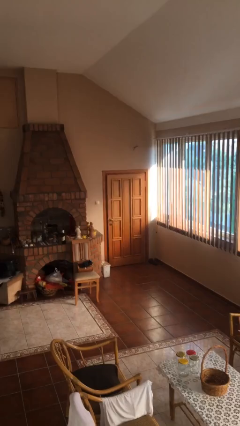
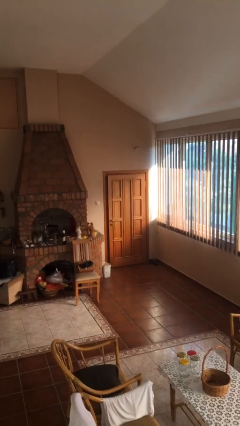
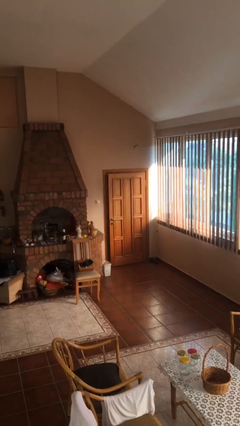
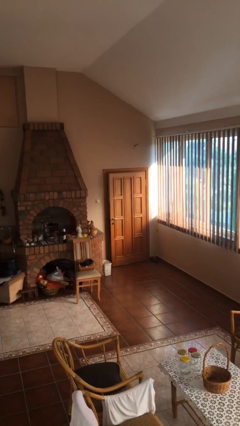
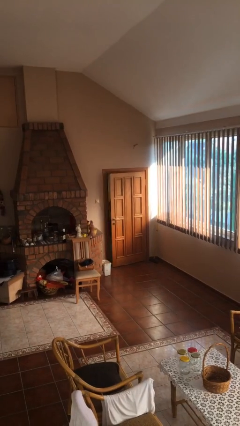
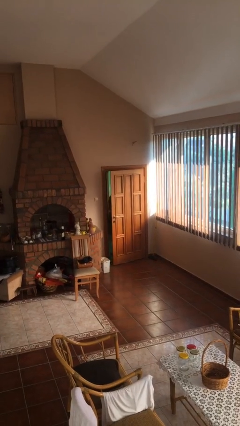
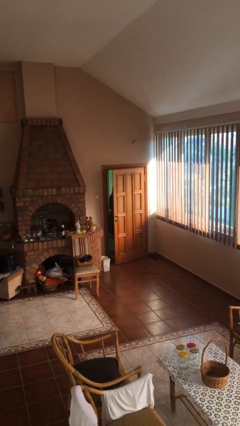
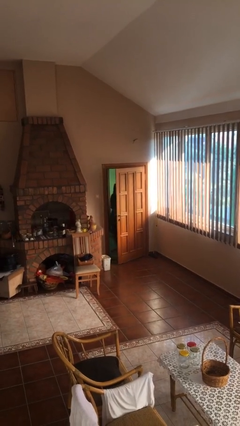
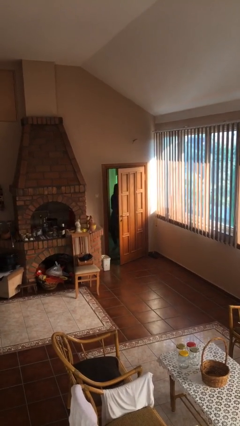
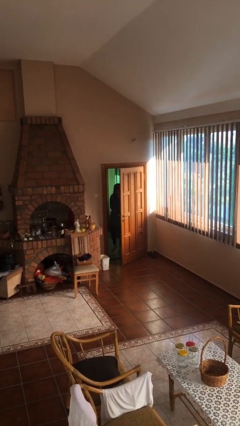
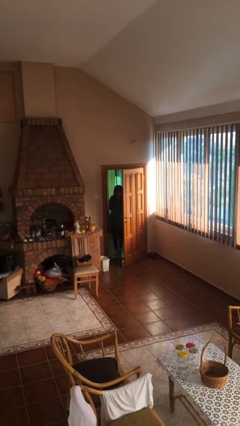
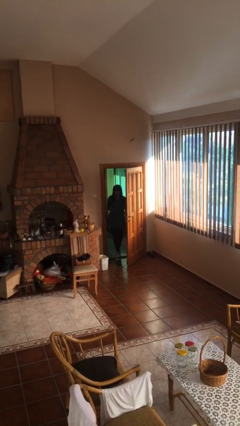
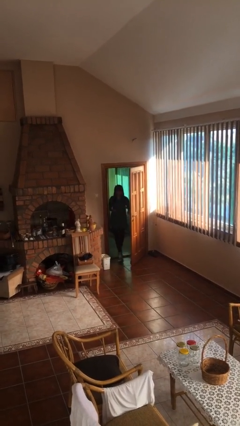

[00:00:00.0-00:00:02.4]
person opens facility door

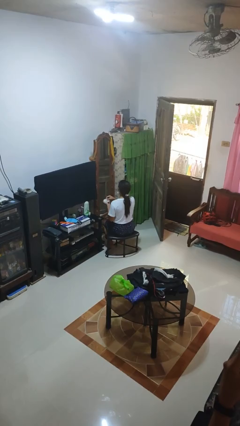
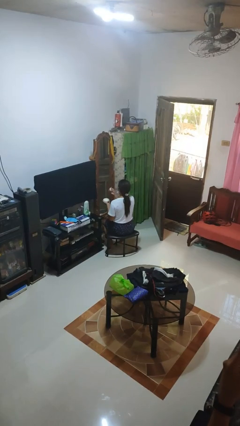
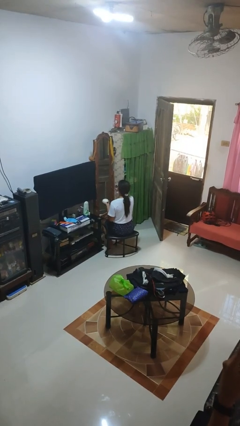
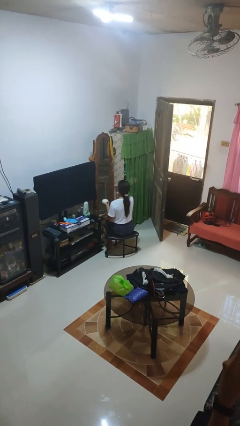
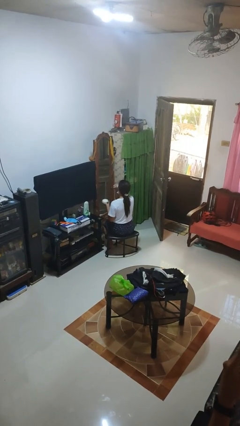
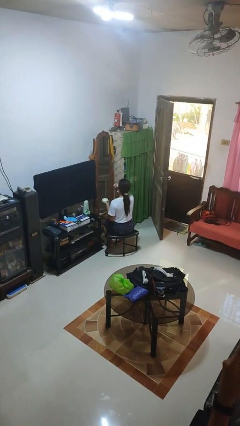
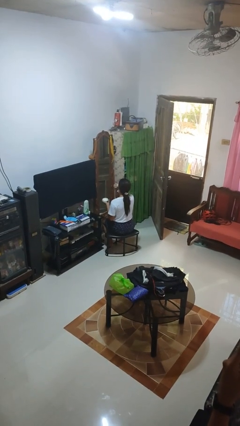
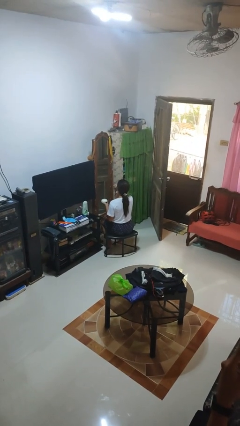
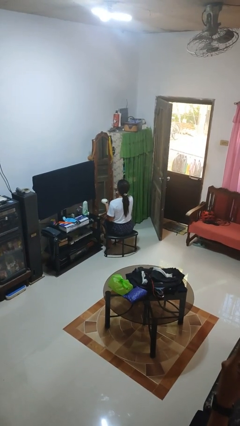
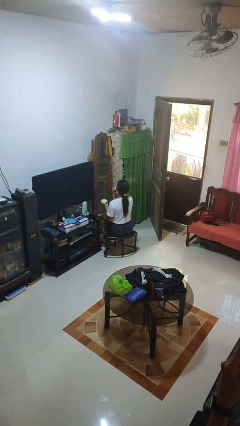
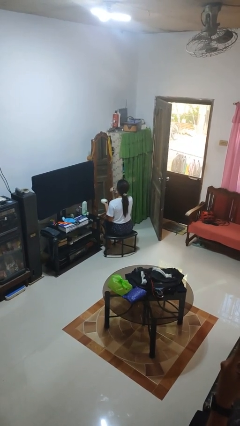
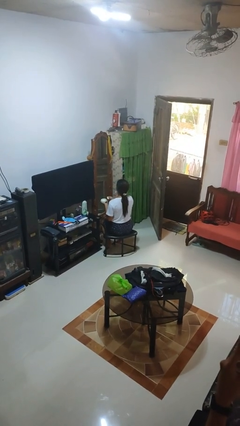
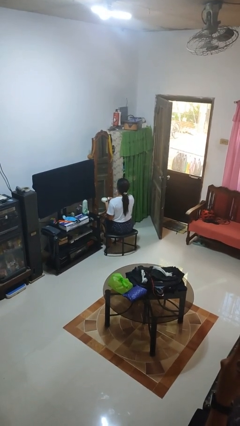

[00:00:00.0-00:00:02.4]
person applies foundation makeup

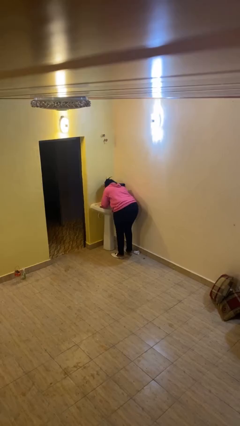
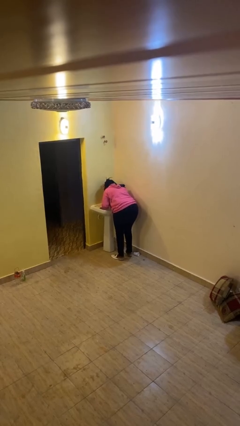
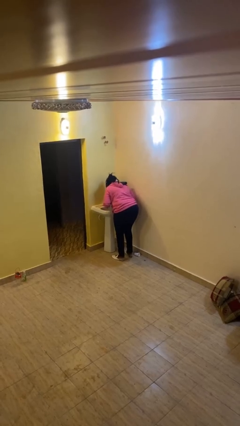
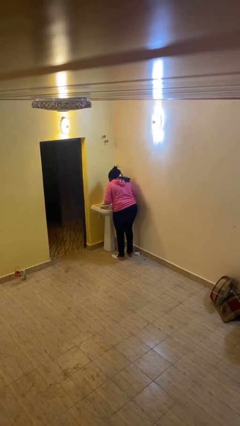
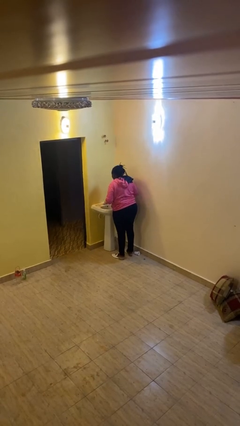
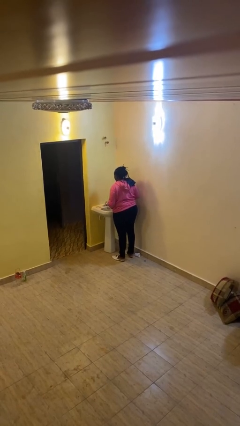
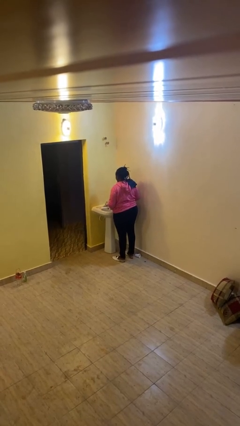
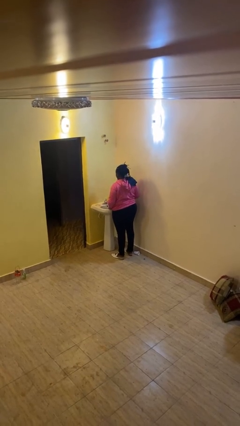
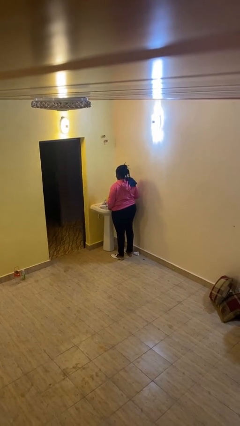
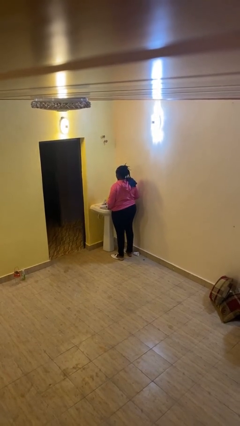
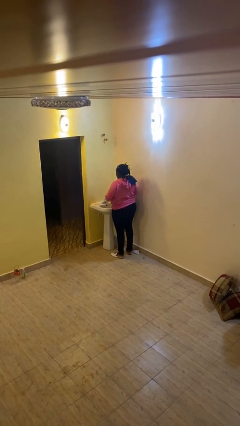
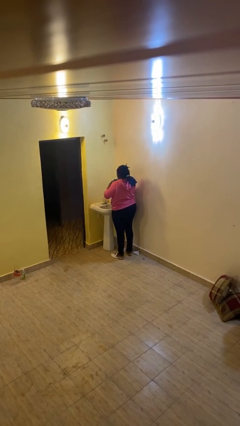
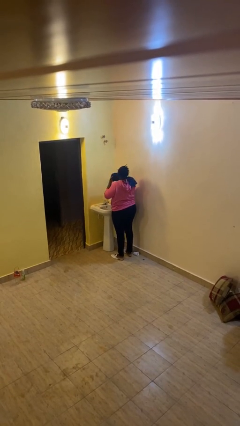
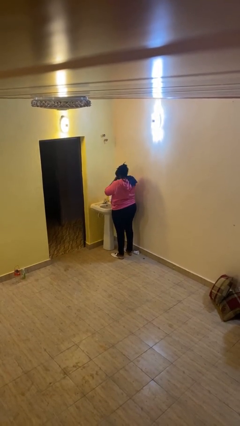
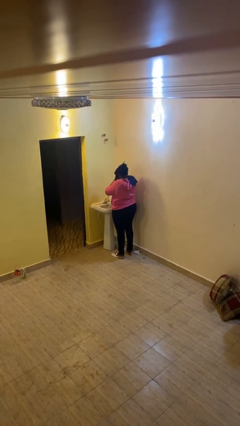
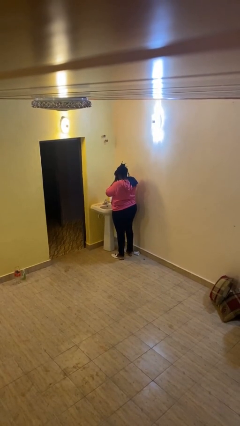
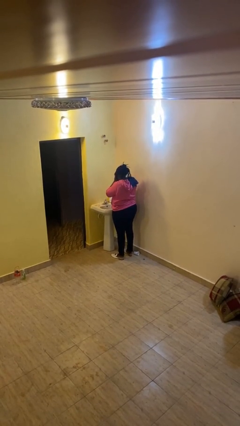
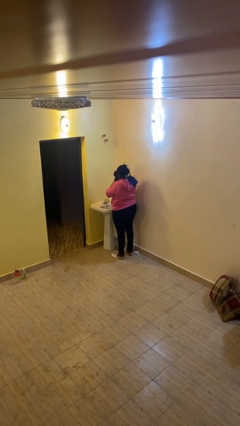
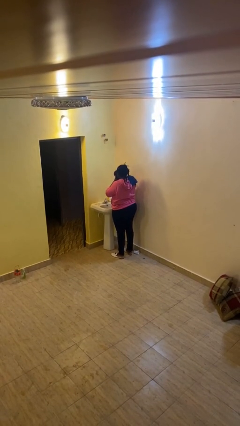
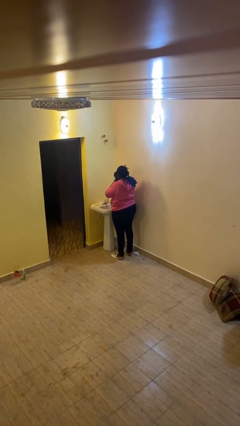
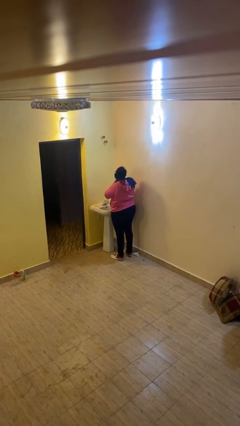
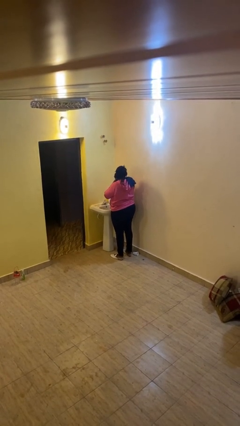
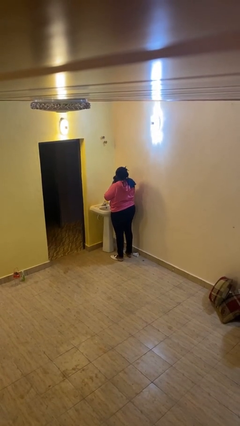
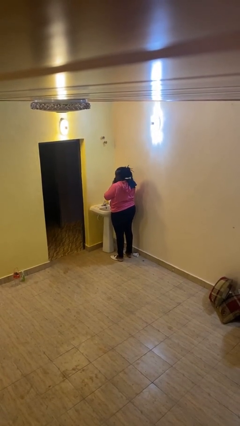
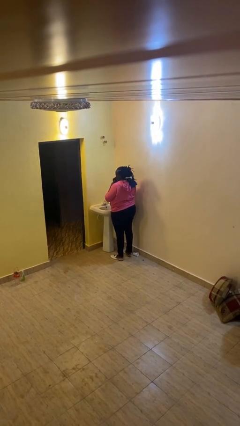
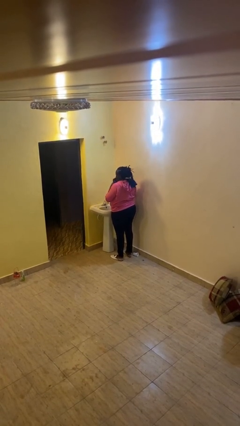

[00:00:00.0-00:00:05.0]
person dries face with towel

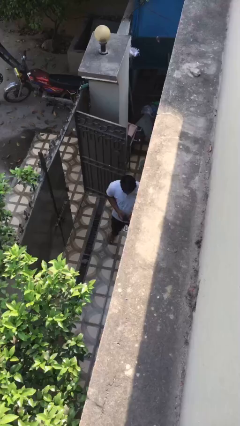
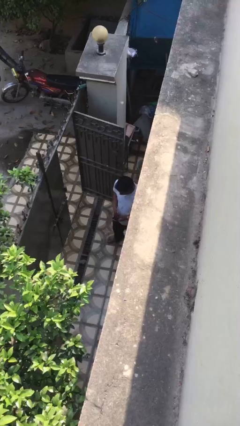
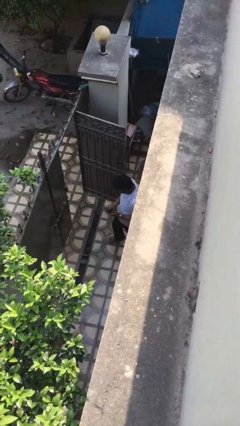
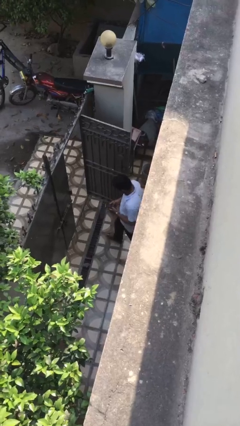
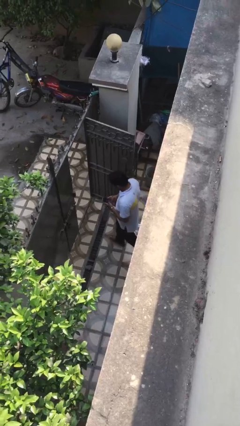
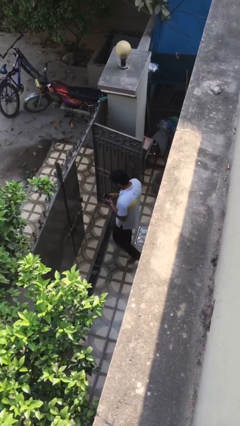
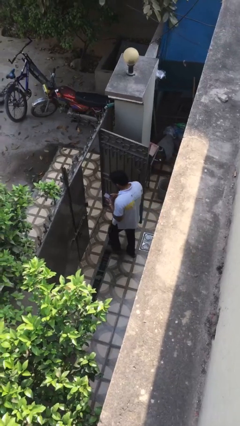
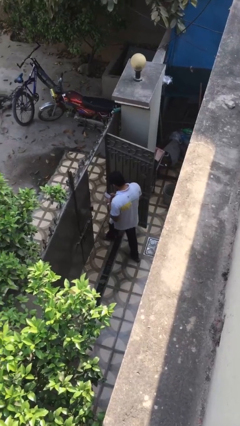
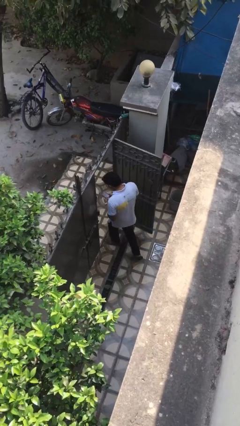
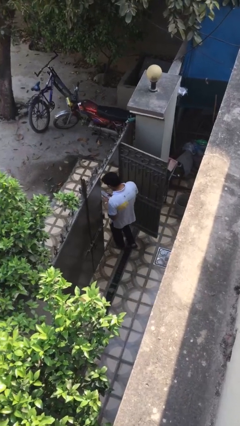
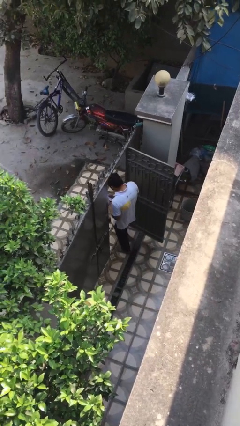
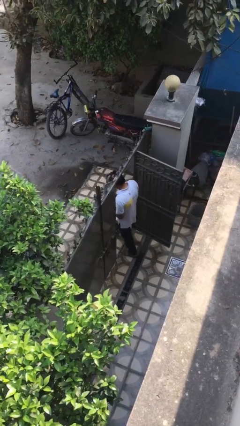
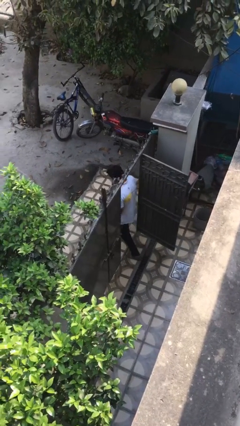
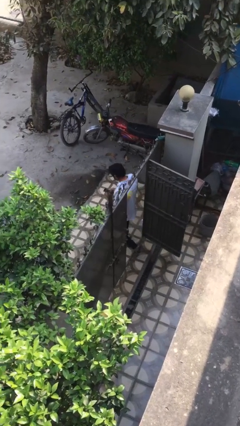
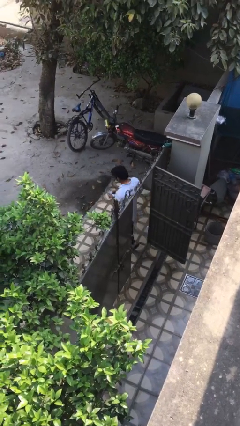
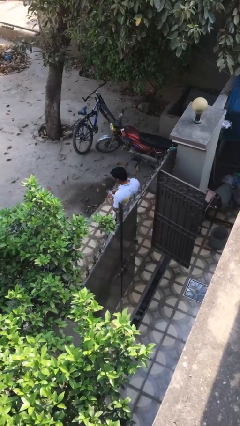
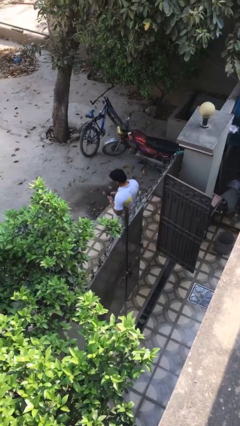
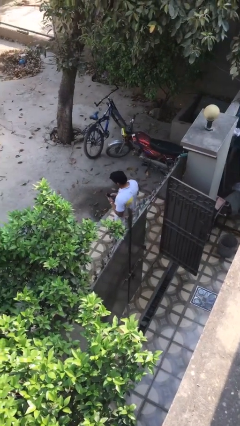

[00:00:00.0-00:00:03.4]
person exits scene through structure

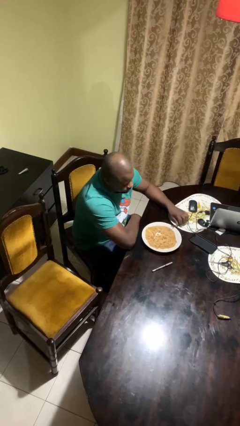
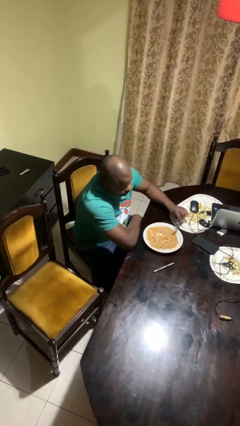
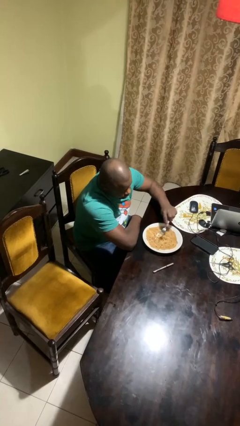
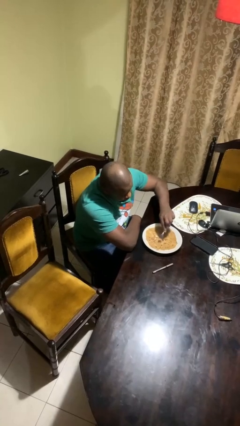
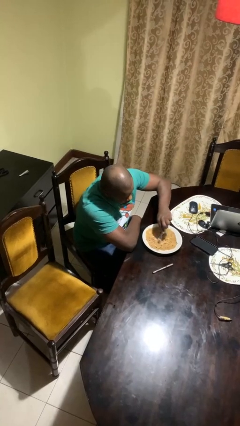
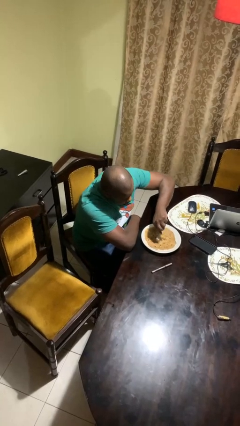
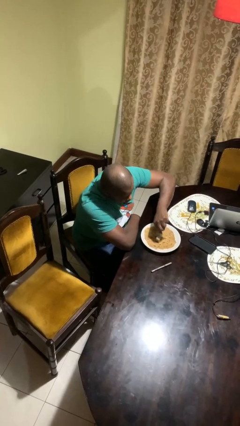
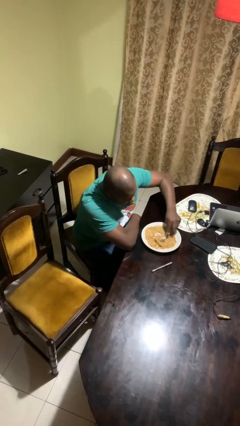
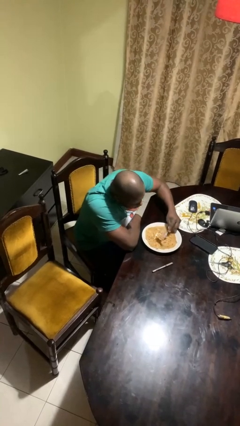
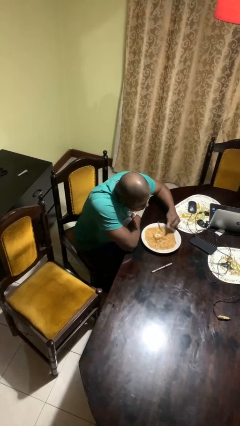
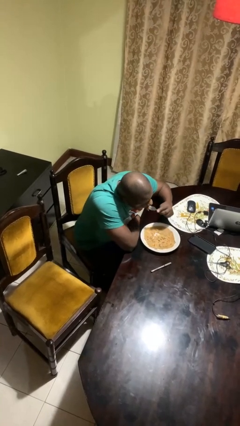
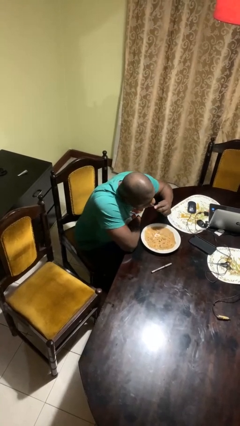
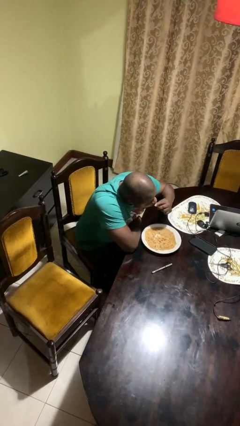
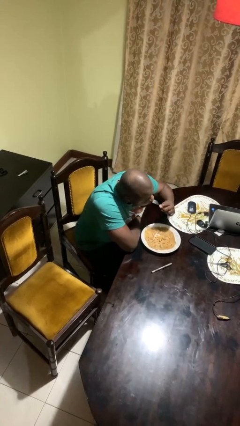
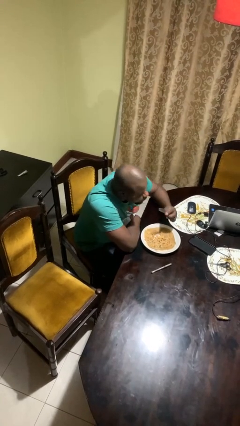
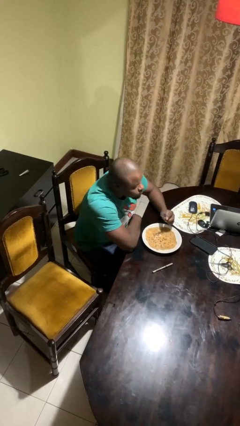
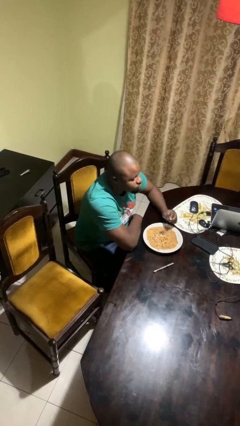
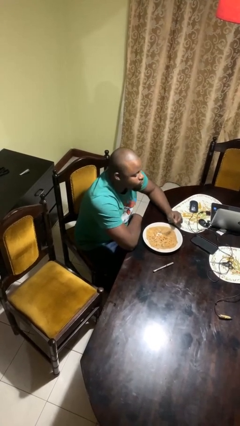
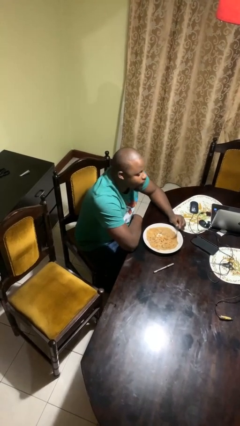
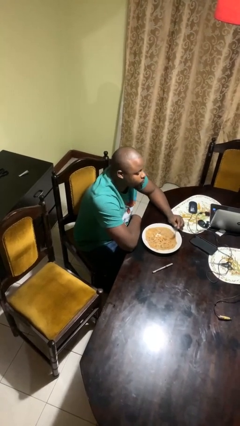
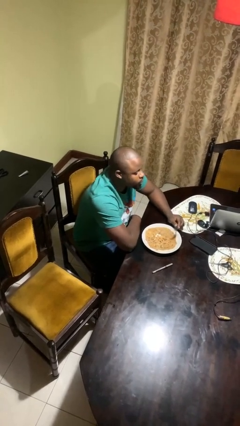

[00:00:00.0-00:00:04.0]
person eats with utensil
